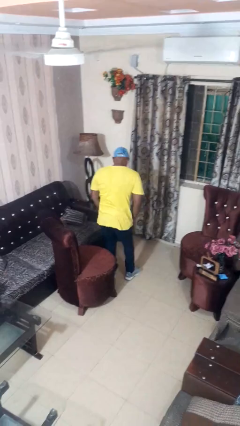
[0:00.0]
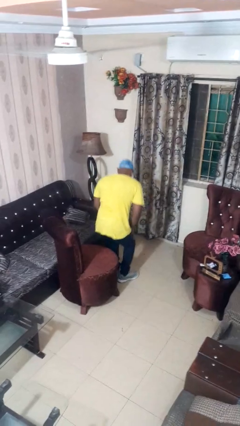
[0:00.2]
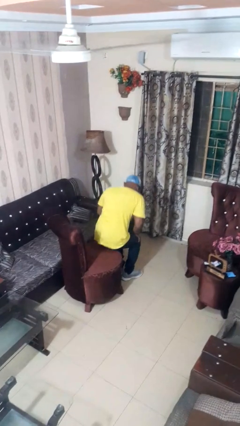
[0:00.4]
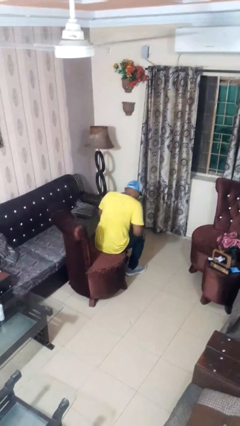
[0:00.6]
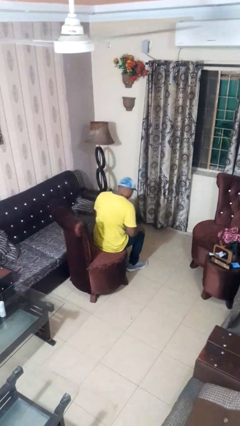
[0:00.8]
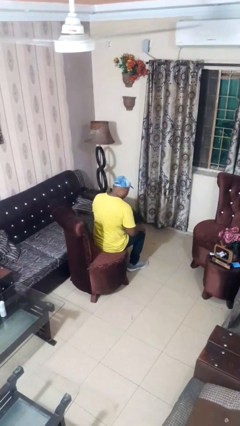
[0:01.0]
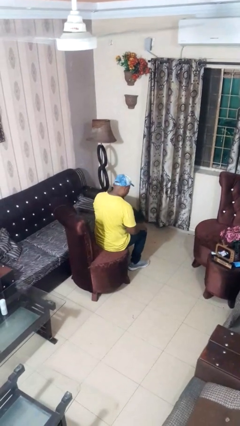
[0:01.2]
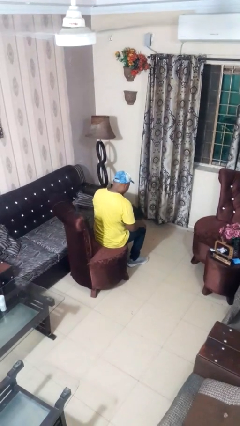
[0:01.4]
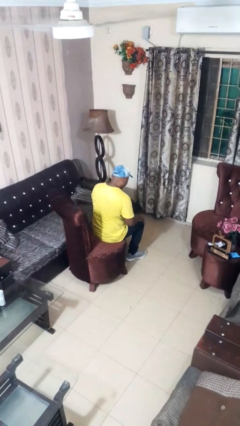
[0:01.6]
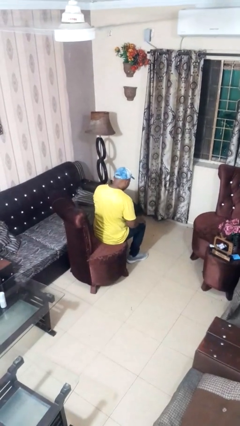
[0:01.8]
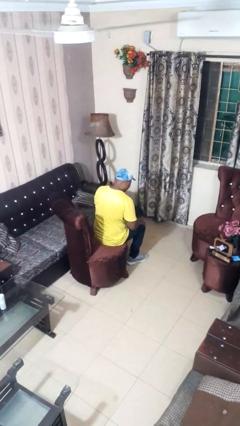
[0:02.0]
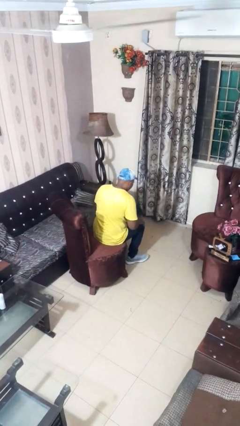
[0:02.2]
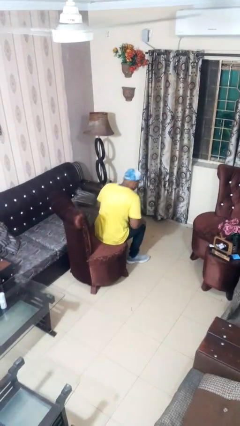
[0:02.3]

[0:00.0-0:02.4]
person sits down

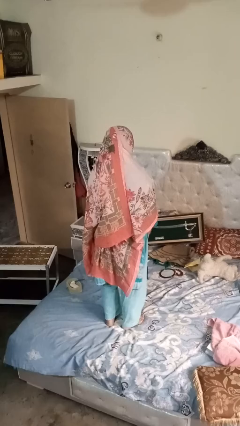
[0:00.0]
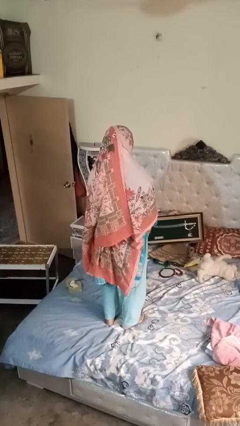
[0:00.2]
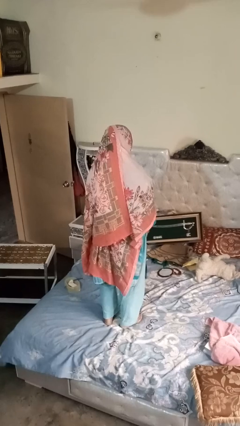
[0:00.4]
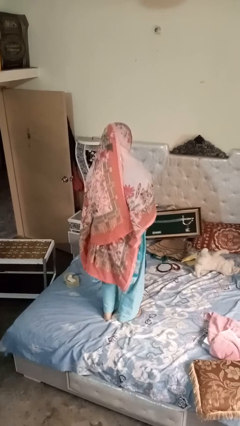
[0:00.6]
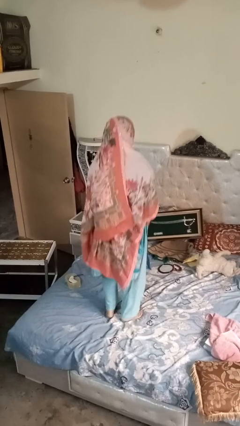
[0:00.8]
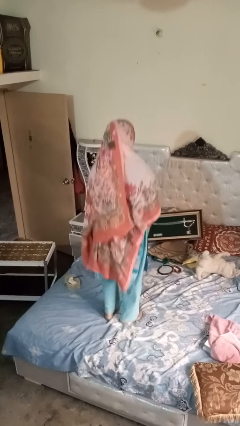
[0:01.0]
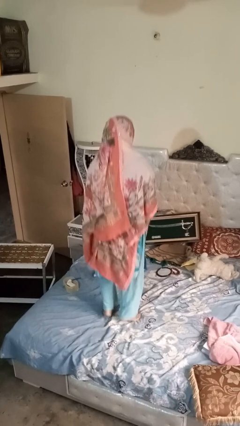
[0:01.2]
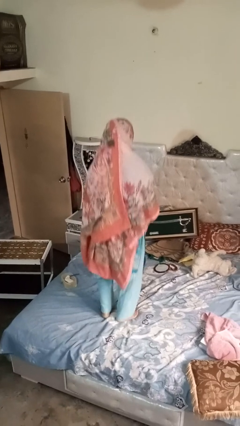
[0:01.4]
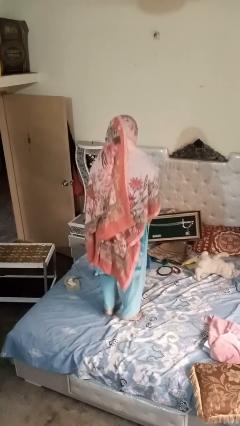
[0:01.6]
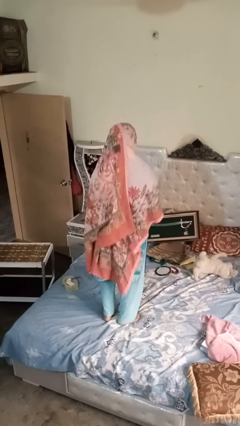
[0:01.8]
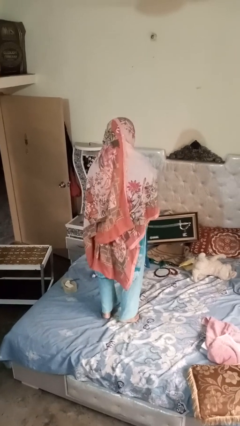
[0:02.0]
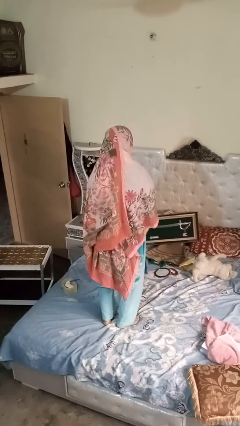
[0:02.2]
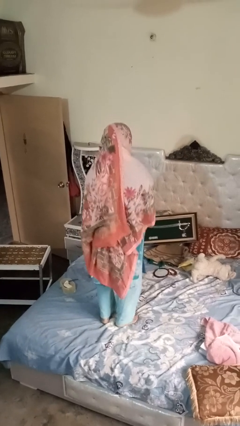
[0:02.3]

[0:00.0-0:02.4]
person jumps on bed

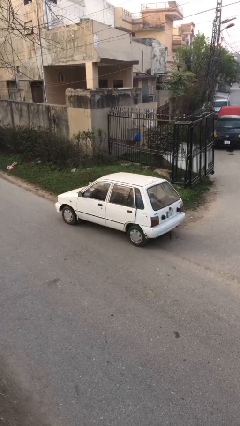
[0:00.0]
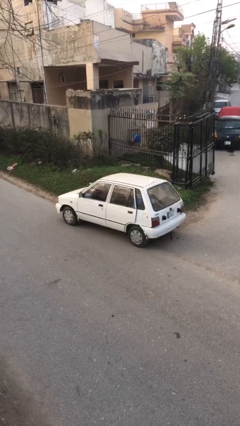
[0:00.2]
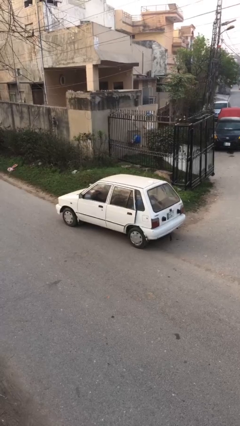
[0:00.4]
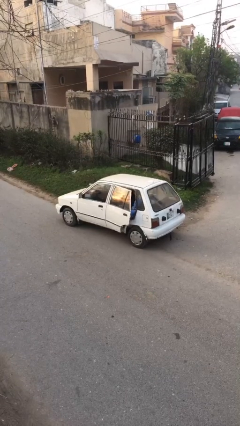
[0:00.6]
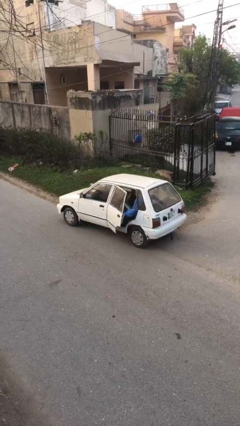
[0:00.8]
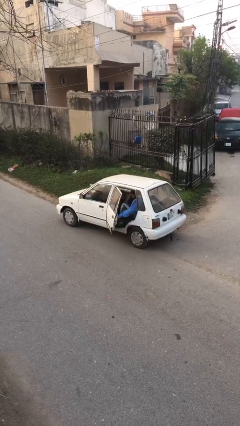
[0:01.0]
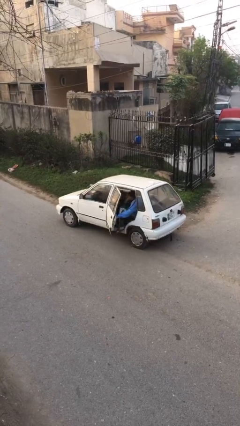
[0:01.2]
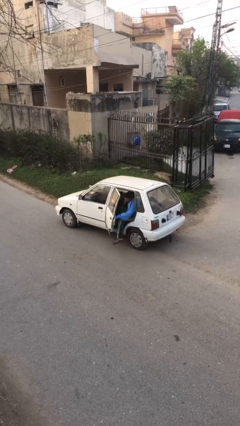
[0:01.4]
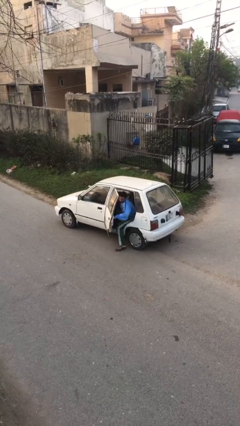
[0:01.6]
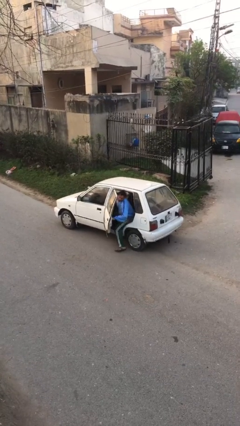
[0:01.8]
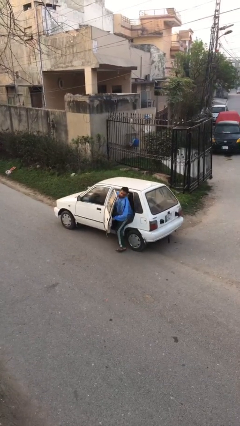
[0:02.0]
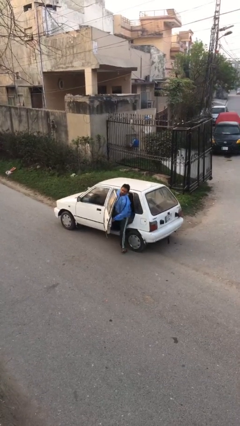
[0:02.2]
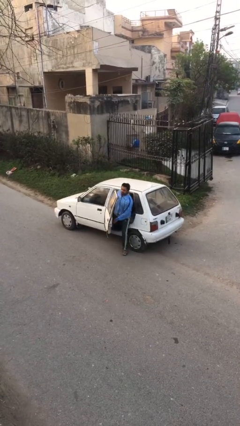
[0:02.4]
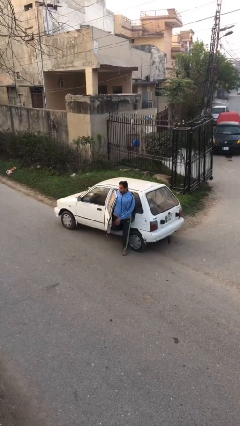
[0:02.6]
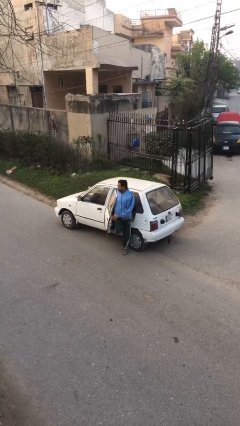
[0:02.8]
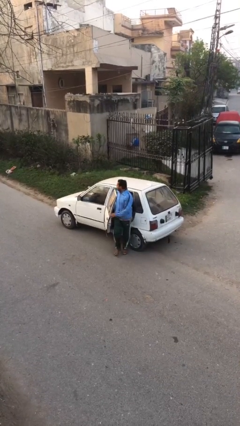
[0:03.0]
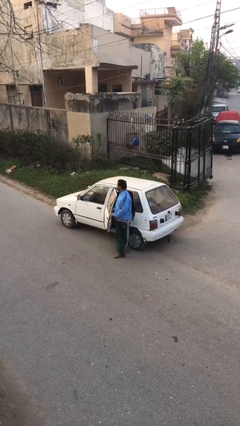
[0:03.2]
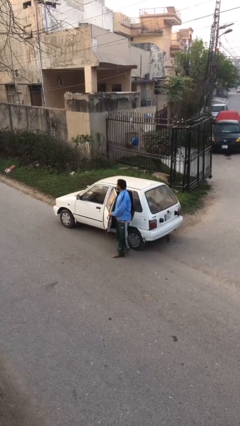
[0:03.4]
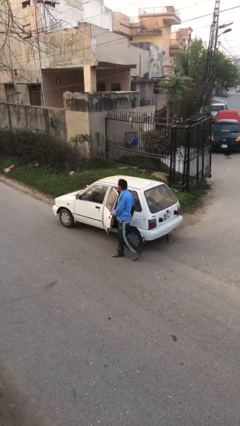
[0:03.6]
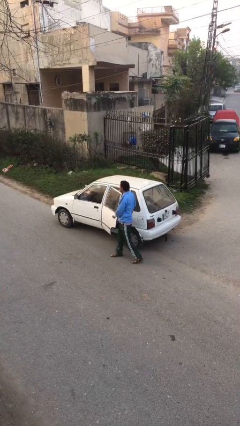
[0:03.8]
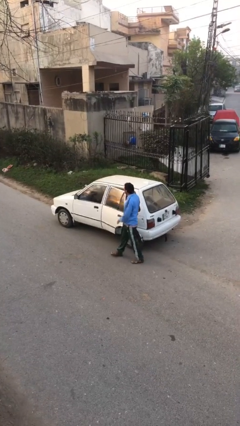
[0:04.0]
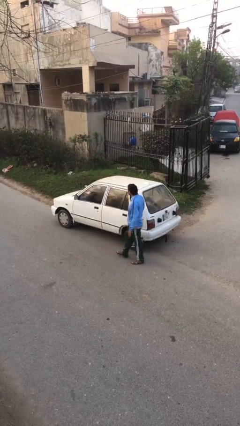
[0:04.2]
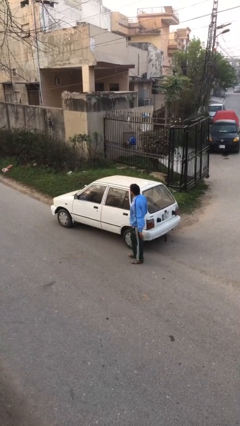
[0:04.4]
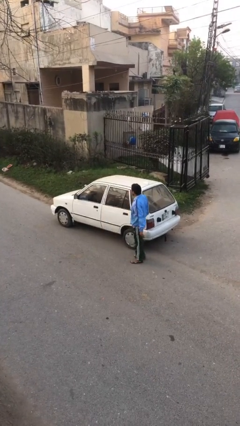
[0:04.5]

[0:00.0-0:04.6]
car drops off person

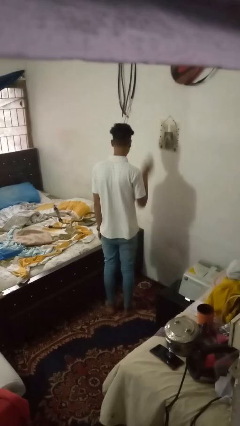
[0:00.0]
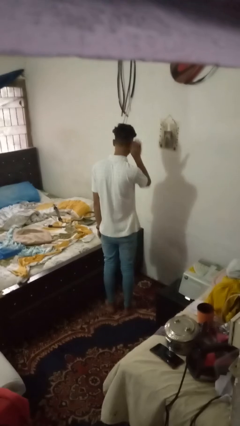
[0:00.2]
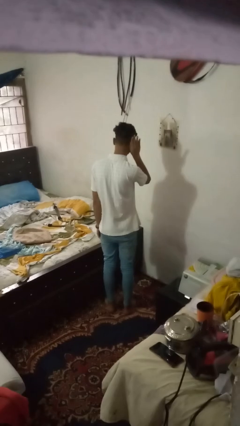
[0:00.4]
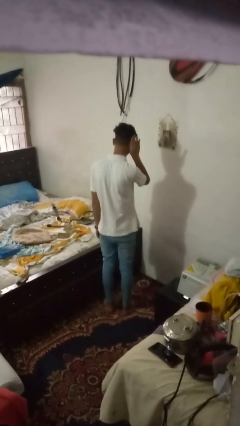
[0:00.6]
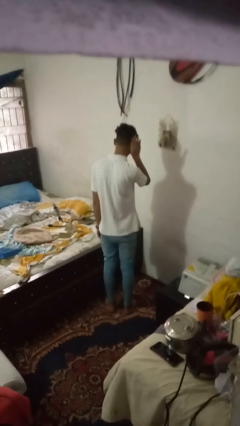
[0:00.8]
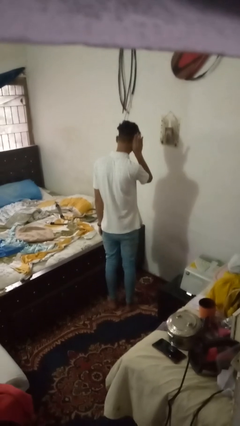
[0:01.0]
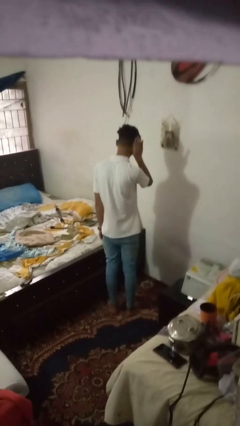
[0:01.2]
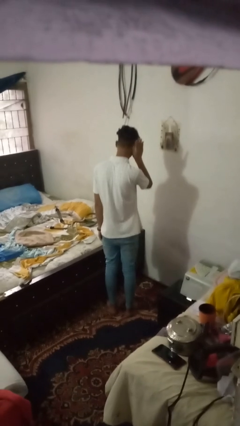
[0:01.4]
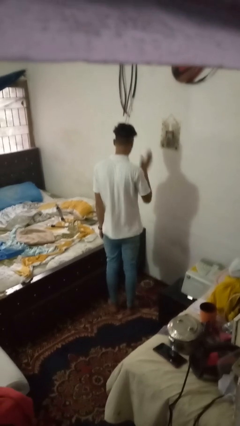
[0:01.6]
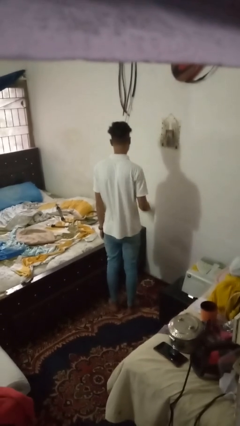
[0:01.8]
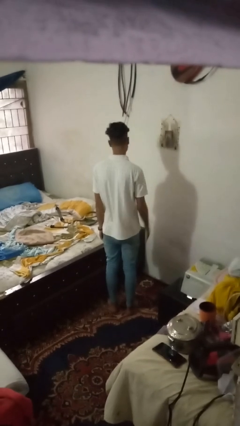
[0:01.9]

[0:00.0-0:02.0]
person gestures listen closely

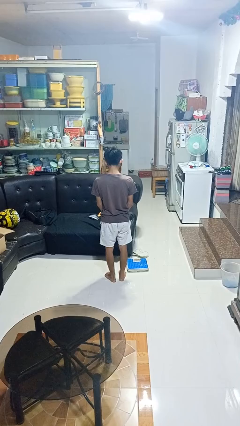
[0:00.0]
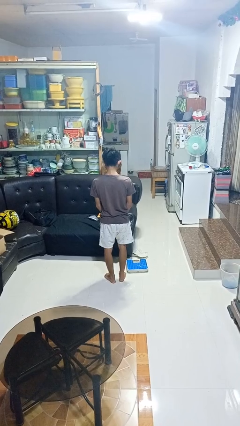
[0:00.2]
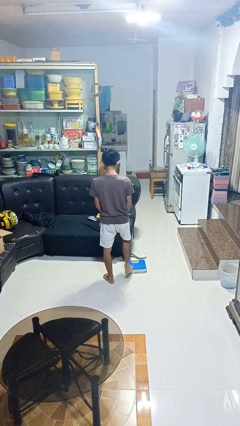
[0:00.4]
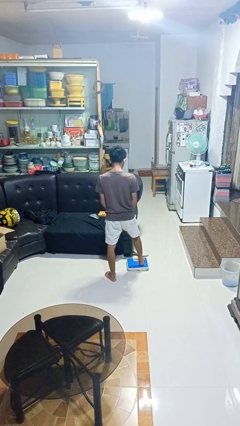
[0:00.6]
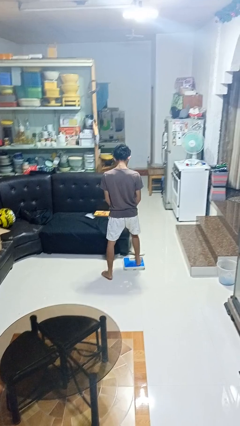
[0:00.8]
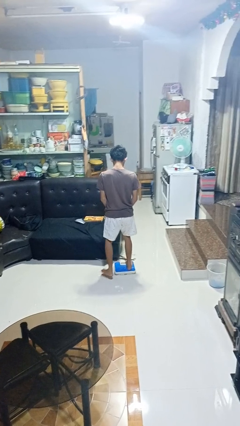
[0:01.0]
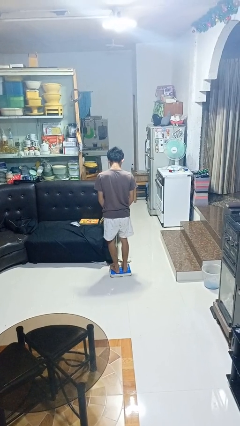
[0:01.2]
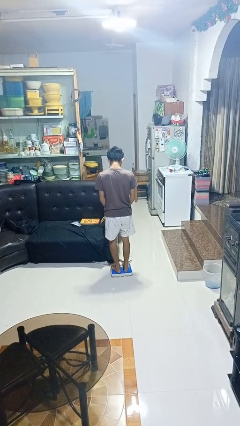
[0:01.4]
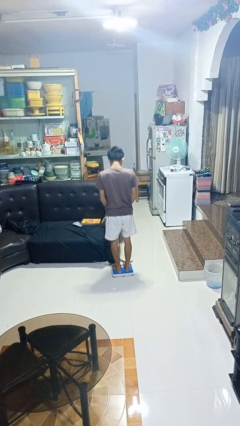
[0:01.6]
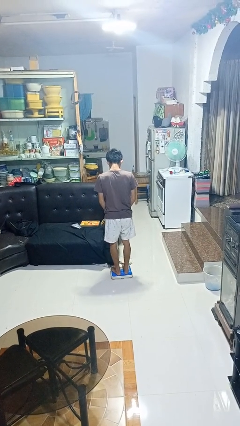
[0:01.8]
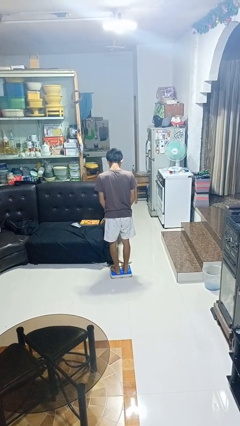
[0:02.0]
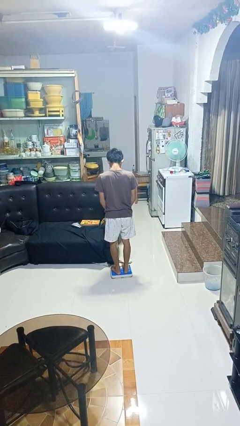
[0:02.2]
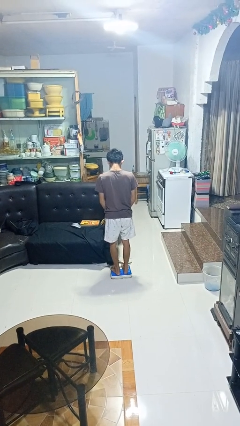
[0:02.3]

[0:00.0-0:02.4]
person uses bodyweight scale

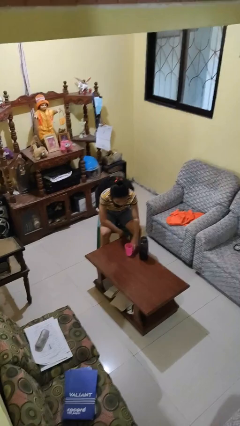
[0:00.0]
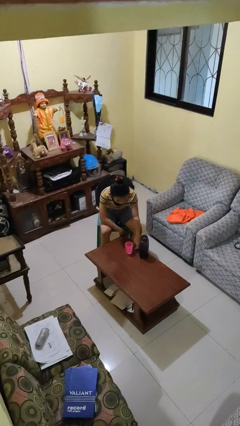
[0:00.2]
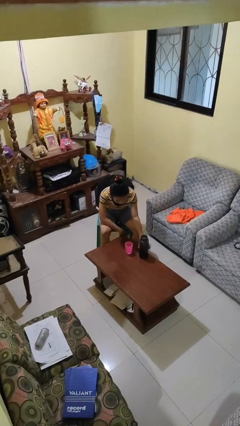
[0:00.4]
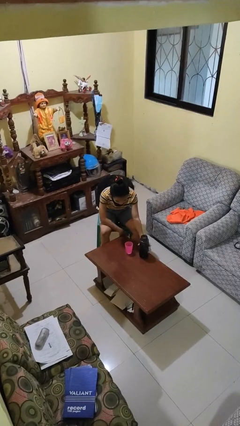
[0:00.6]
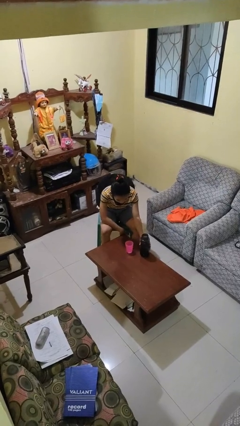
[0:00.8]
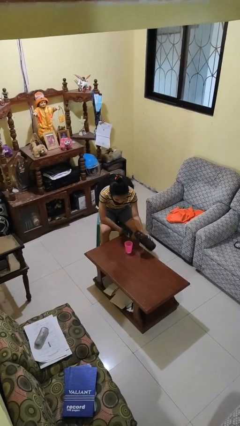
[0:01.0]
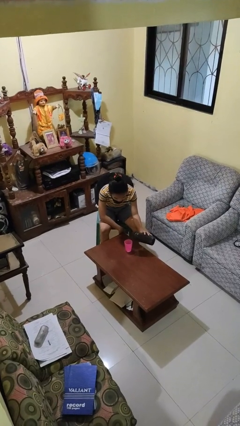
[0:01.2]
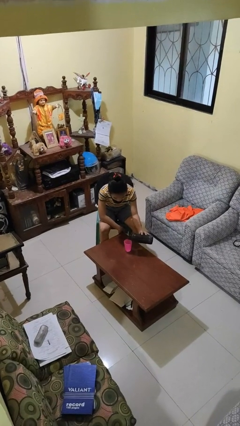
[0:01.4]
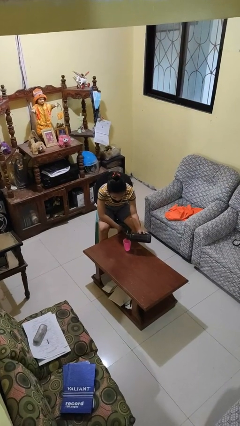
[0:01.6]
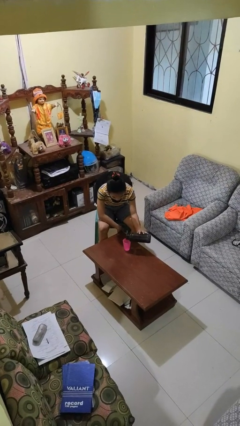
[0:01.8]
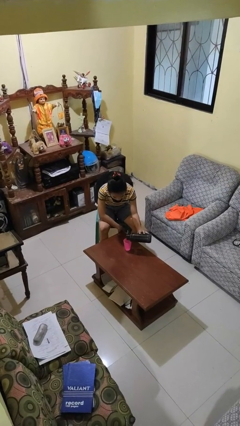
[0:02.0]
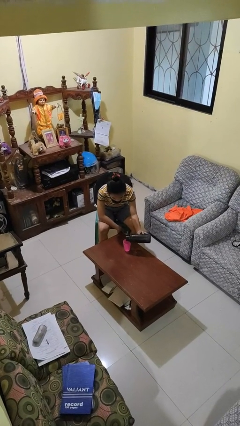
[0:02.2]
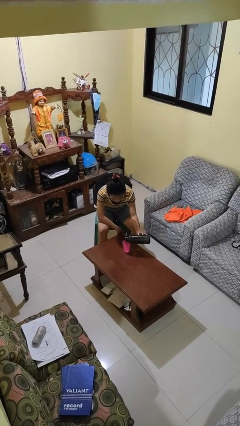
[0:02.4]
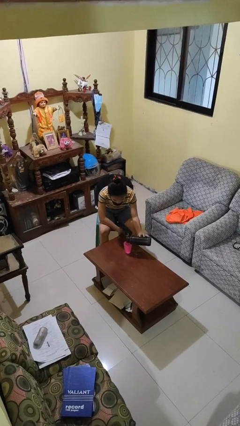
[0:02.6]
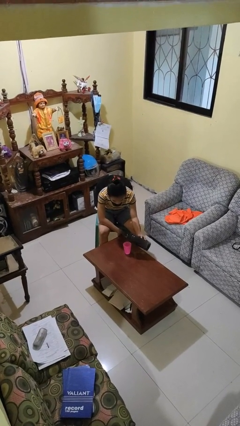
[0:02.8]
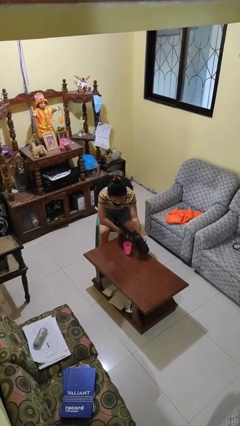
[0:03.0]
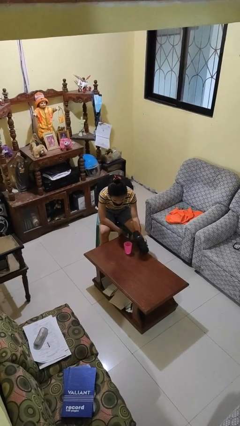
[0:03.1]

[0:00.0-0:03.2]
person pours liquid into cup
